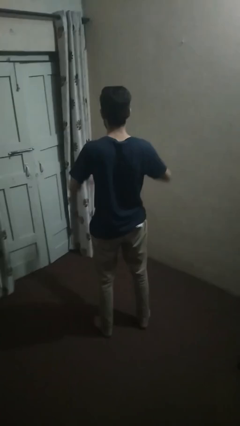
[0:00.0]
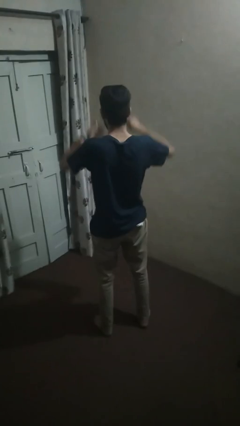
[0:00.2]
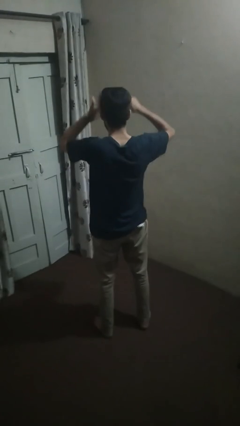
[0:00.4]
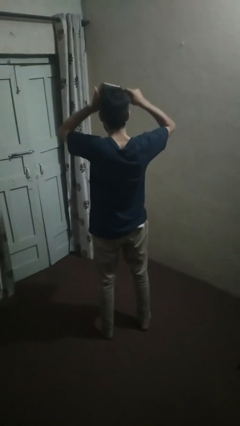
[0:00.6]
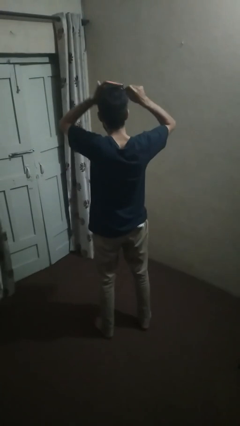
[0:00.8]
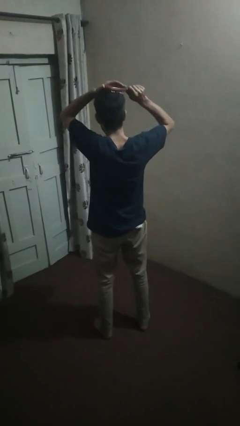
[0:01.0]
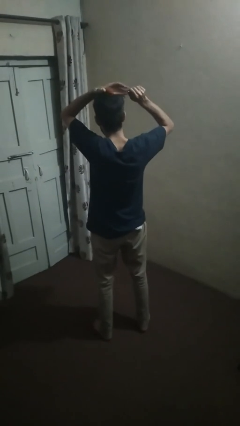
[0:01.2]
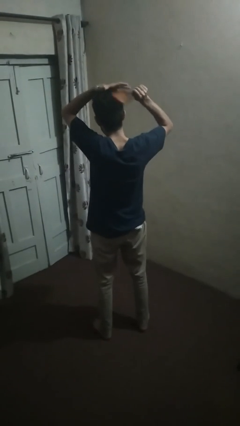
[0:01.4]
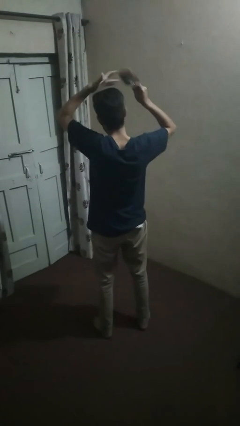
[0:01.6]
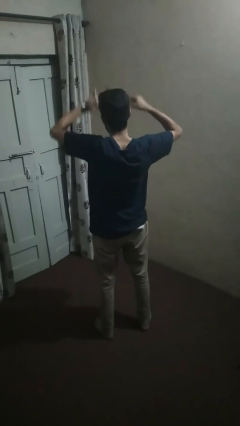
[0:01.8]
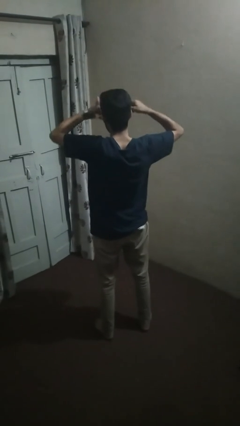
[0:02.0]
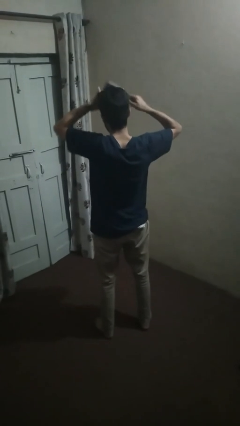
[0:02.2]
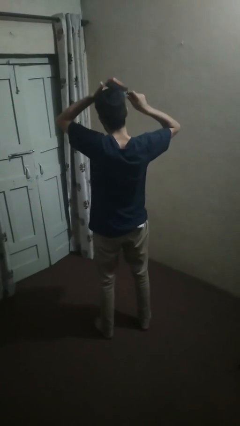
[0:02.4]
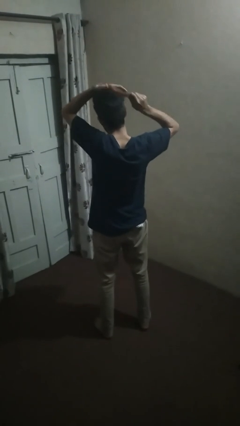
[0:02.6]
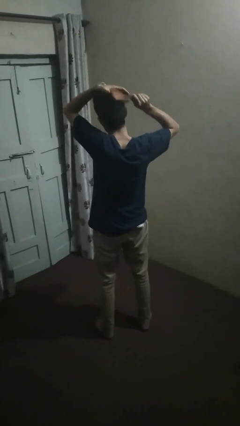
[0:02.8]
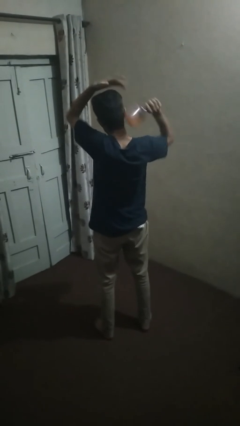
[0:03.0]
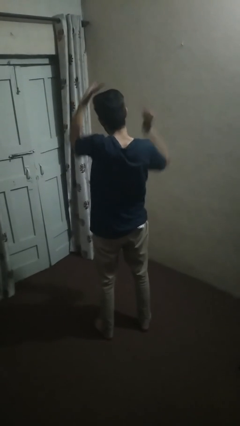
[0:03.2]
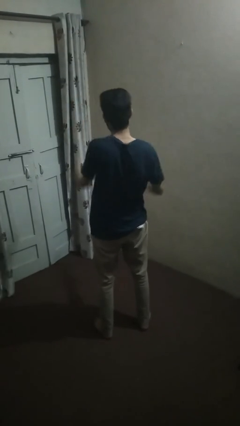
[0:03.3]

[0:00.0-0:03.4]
person brushes hair

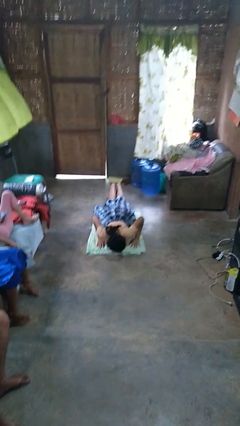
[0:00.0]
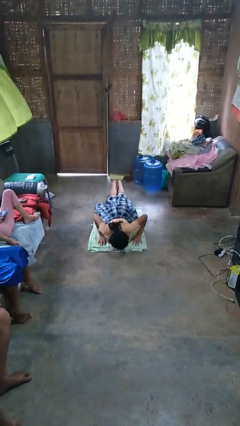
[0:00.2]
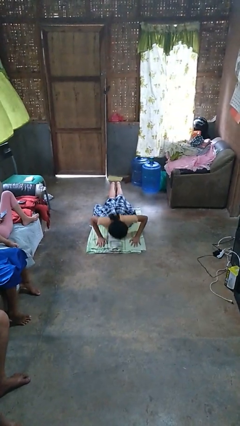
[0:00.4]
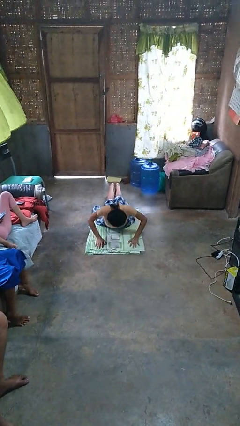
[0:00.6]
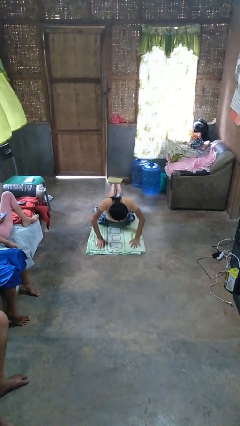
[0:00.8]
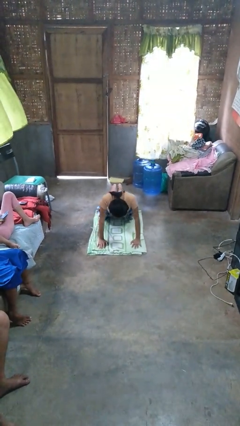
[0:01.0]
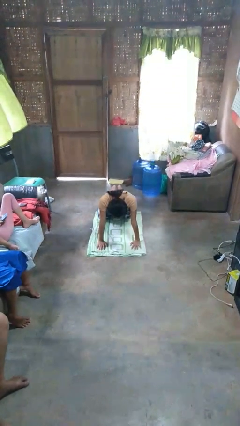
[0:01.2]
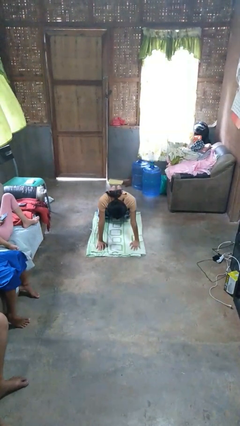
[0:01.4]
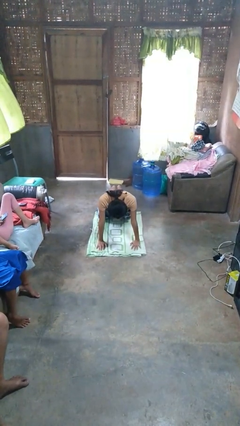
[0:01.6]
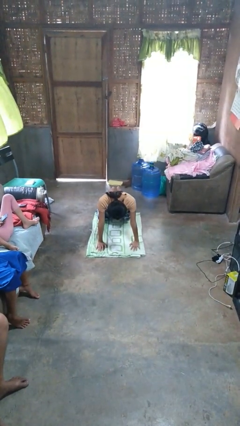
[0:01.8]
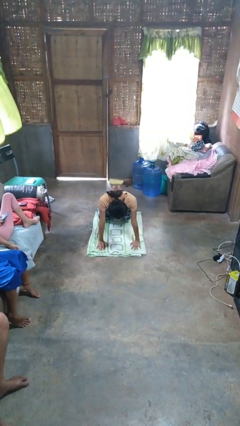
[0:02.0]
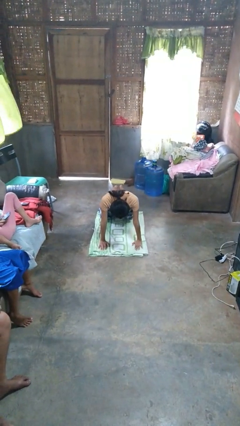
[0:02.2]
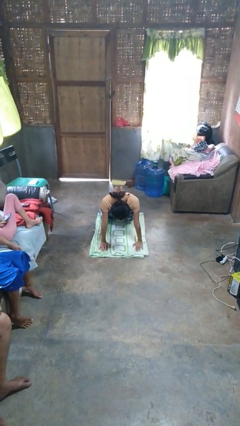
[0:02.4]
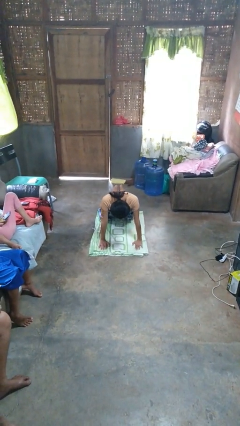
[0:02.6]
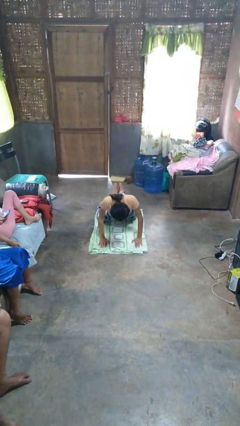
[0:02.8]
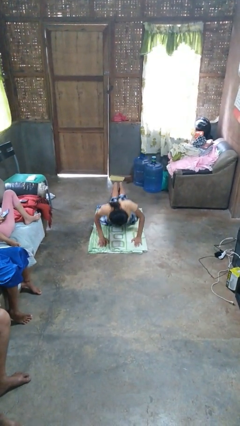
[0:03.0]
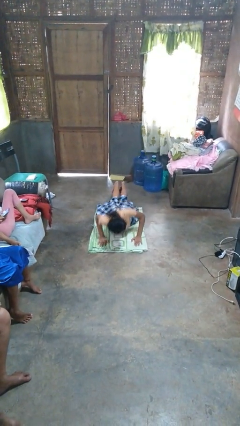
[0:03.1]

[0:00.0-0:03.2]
person exercises with pushup

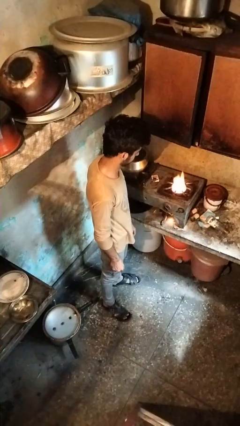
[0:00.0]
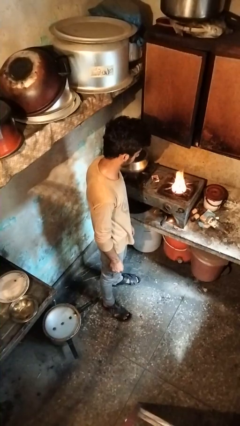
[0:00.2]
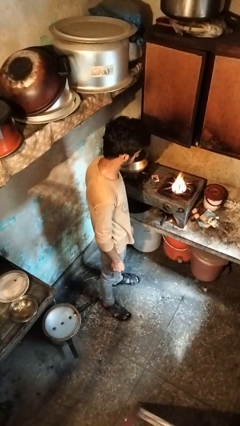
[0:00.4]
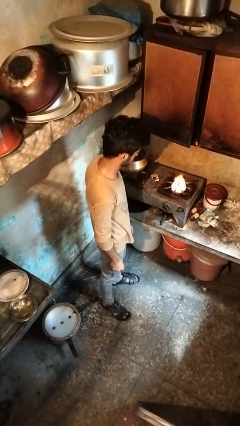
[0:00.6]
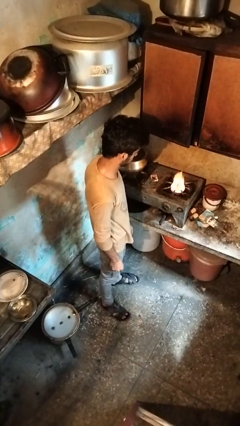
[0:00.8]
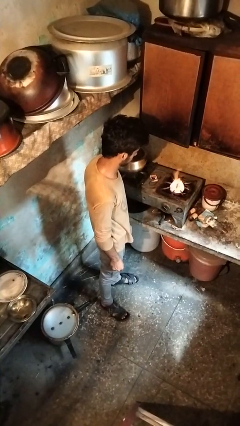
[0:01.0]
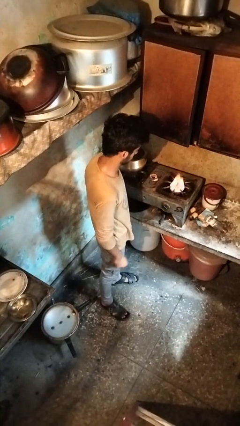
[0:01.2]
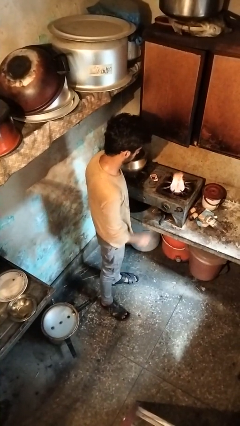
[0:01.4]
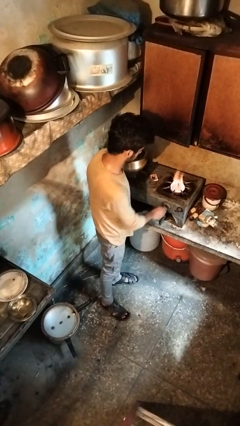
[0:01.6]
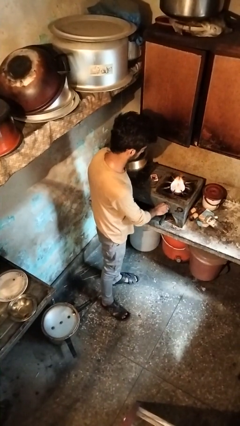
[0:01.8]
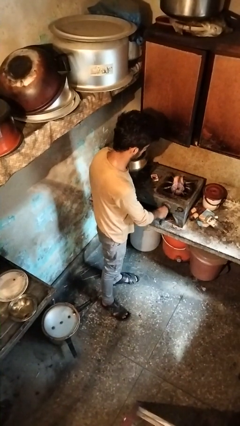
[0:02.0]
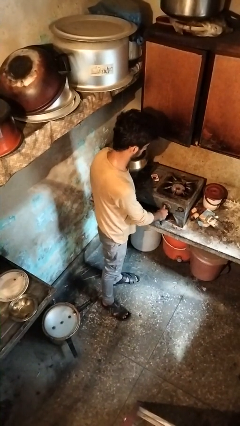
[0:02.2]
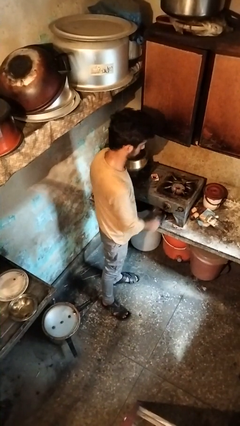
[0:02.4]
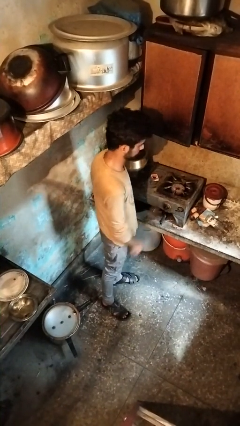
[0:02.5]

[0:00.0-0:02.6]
person turns off stovetop

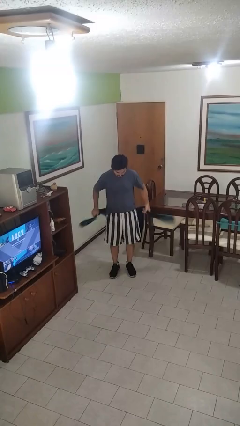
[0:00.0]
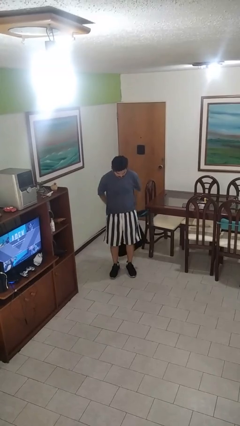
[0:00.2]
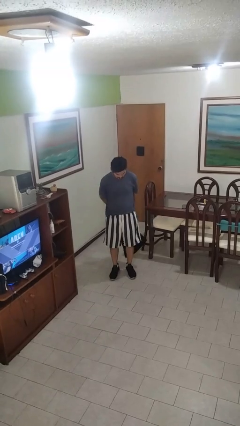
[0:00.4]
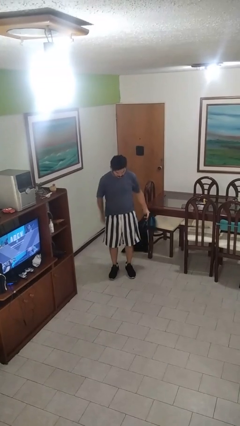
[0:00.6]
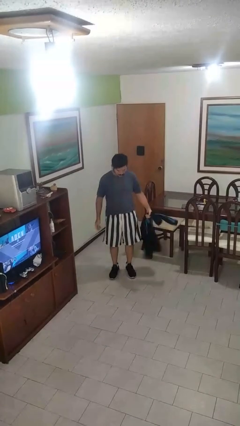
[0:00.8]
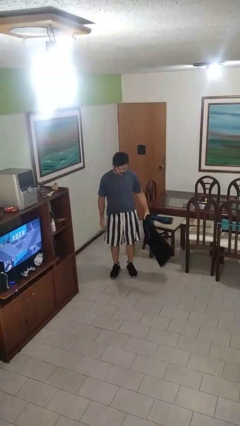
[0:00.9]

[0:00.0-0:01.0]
person unties jacket around waist

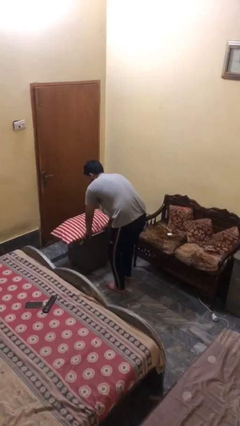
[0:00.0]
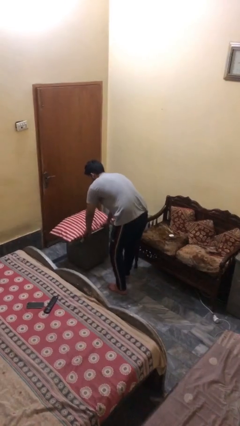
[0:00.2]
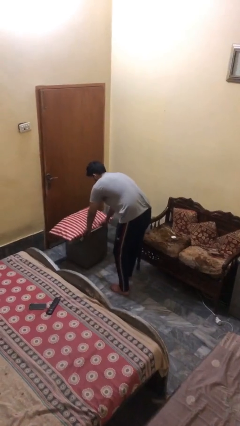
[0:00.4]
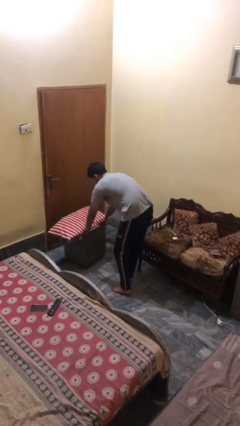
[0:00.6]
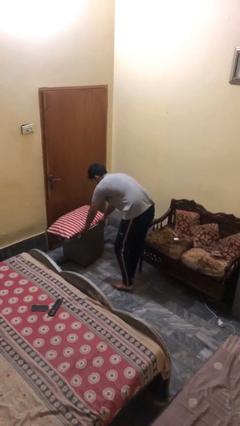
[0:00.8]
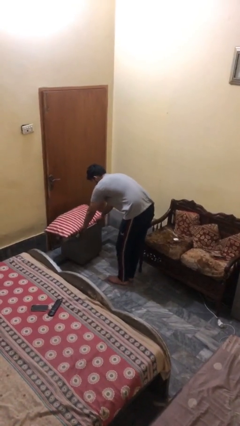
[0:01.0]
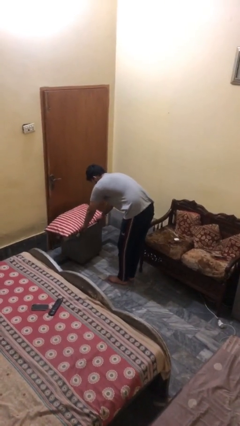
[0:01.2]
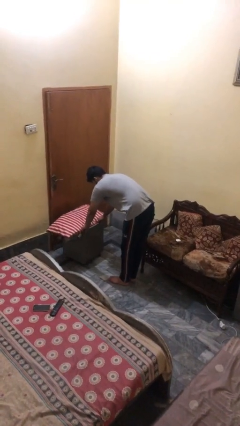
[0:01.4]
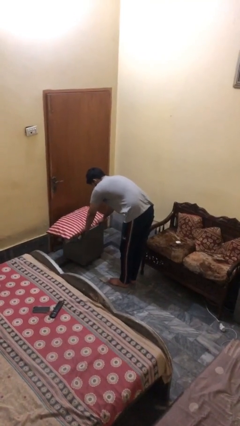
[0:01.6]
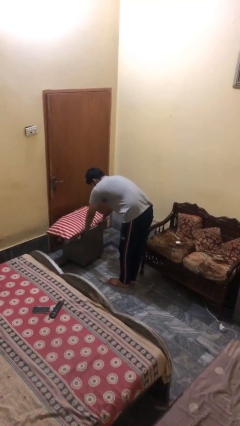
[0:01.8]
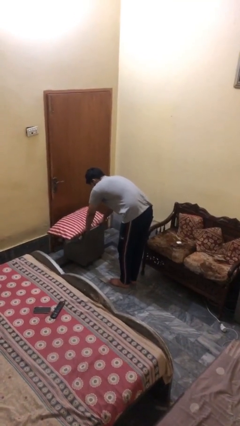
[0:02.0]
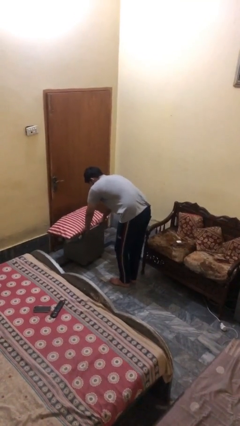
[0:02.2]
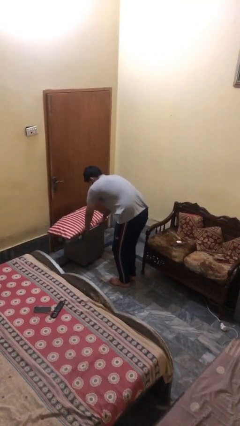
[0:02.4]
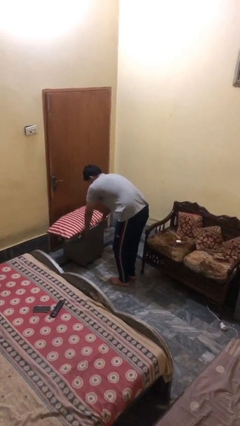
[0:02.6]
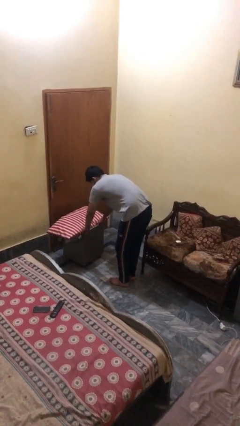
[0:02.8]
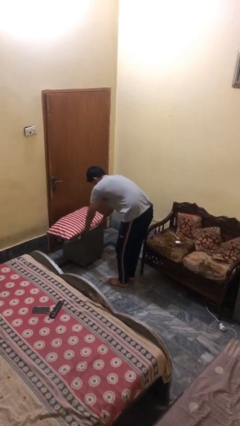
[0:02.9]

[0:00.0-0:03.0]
person pushes wheeled cart

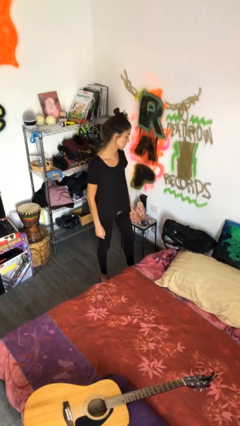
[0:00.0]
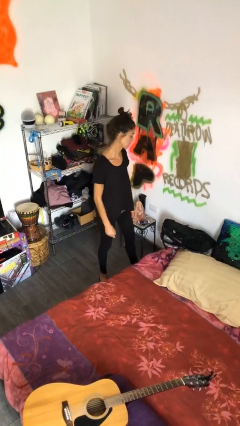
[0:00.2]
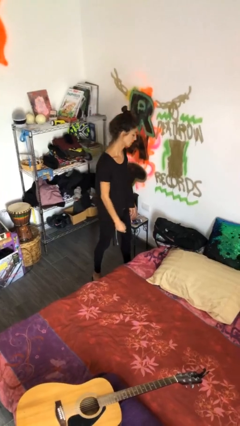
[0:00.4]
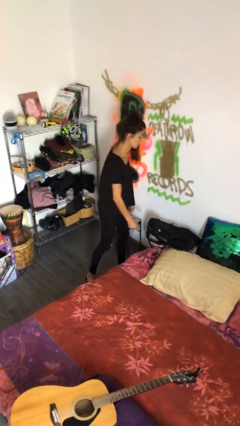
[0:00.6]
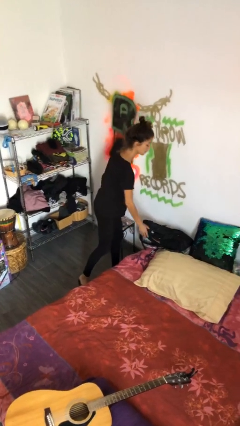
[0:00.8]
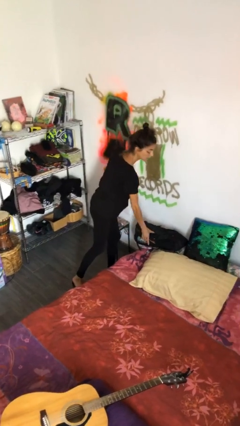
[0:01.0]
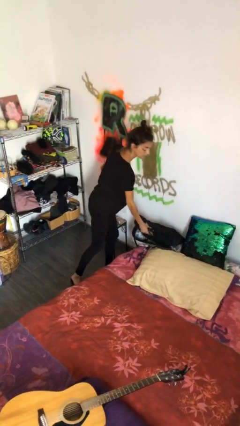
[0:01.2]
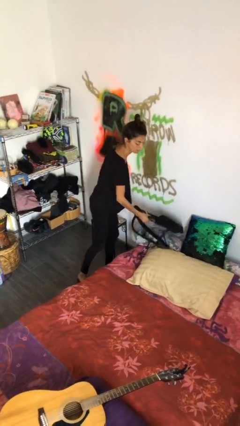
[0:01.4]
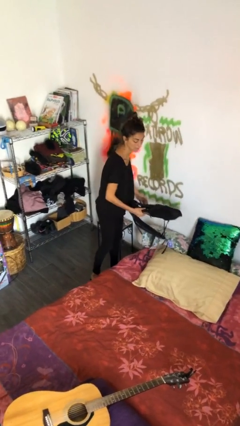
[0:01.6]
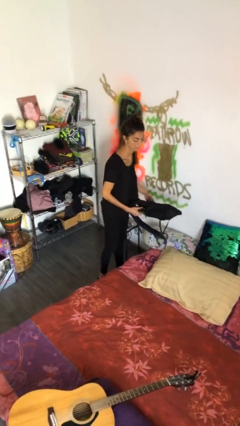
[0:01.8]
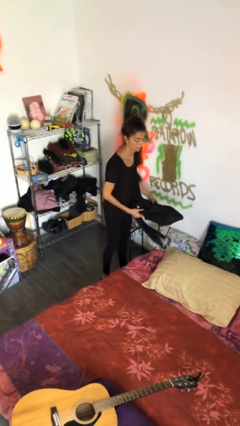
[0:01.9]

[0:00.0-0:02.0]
person picks up object from bed

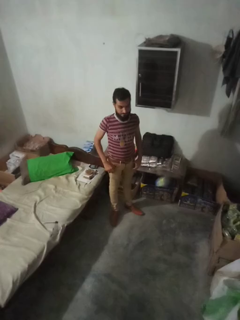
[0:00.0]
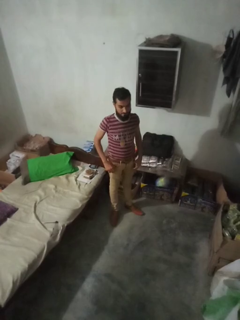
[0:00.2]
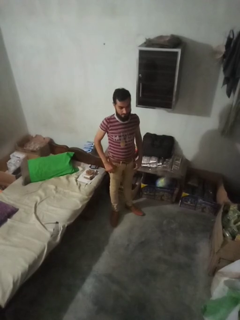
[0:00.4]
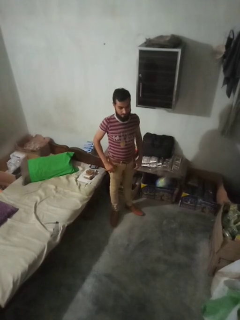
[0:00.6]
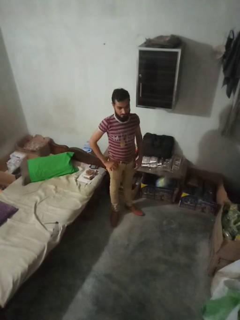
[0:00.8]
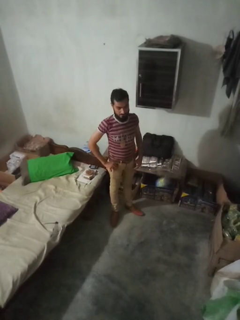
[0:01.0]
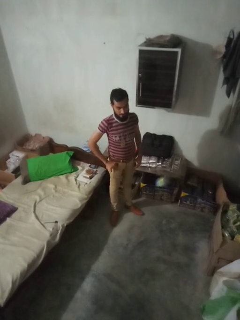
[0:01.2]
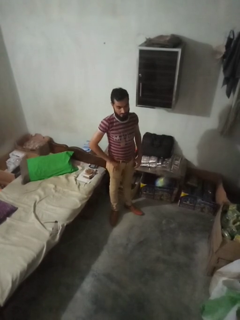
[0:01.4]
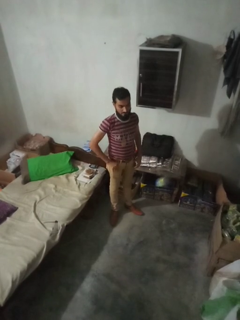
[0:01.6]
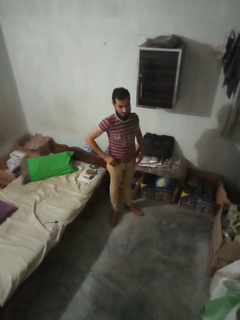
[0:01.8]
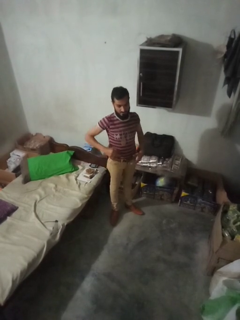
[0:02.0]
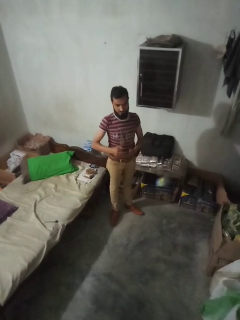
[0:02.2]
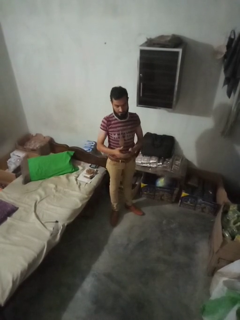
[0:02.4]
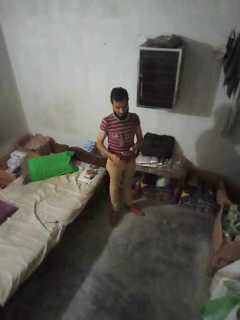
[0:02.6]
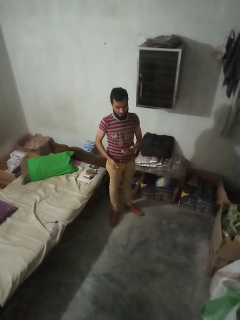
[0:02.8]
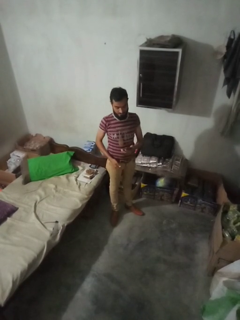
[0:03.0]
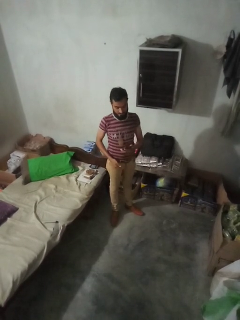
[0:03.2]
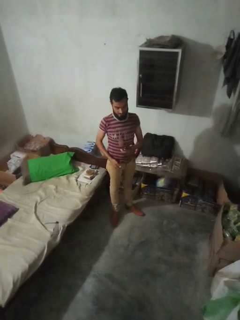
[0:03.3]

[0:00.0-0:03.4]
person takes phone from pocket
